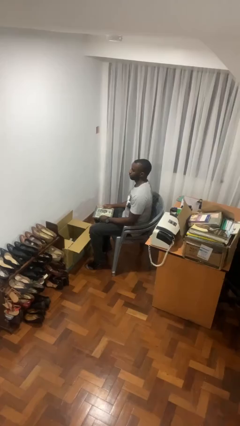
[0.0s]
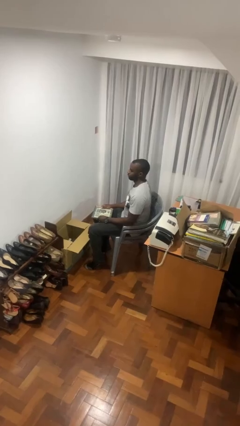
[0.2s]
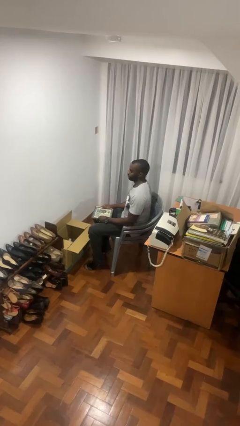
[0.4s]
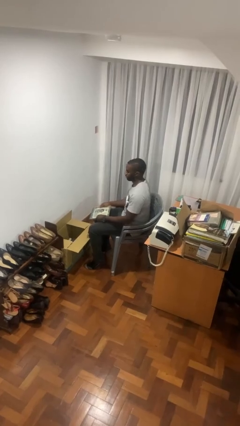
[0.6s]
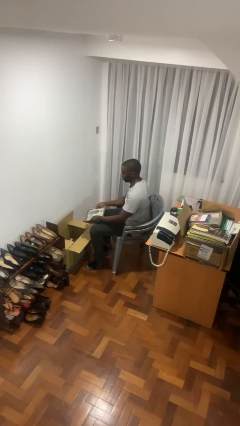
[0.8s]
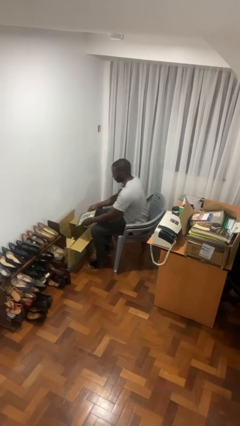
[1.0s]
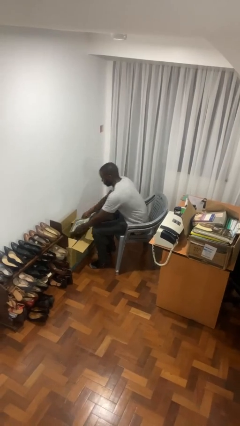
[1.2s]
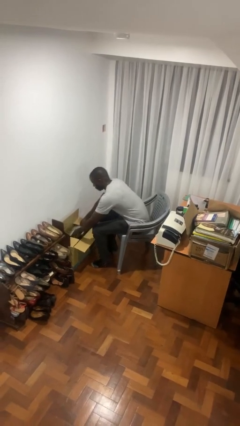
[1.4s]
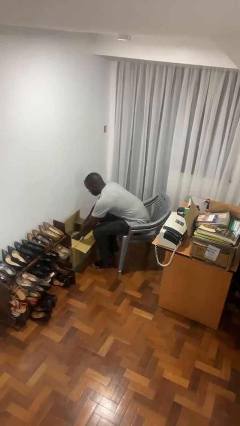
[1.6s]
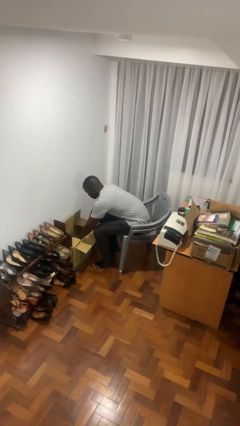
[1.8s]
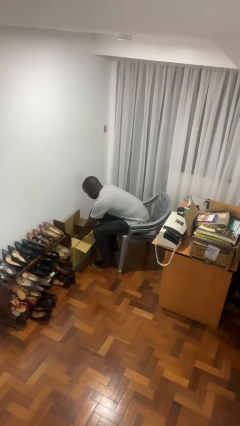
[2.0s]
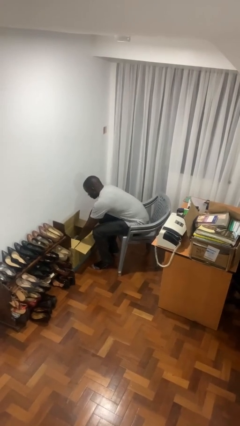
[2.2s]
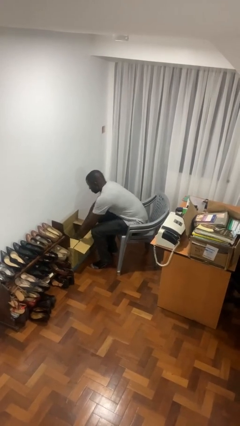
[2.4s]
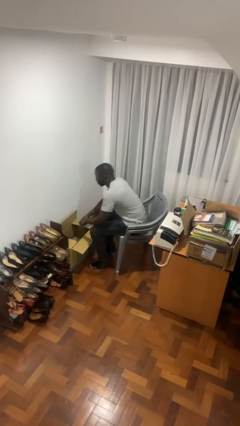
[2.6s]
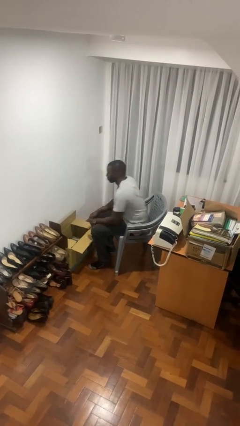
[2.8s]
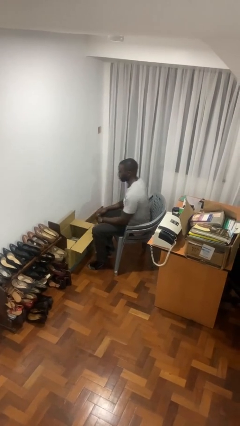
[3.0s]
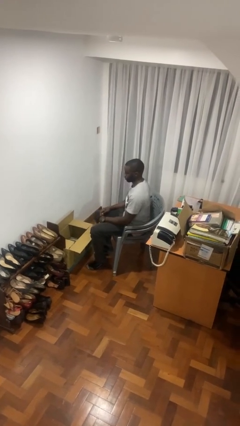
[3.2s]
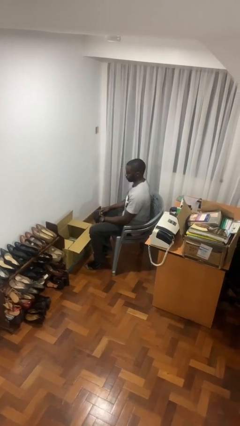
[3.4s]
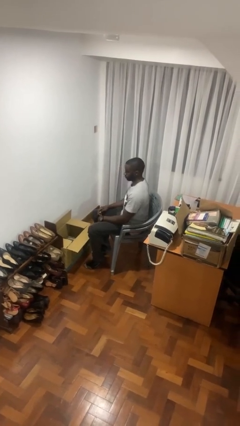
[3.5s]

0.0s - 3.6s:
person puts object into box

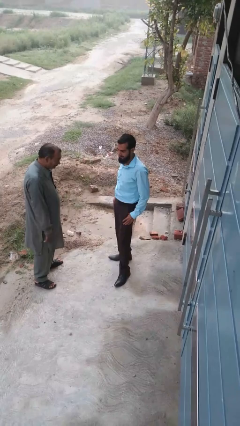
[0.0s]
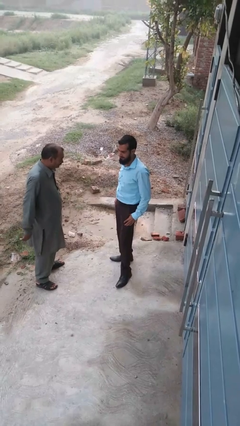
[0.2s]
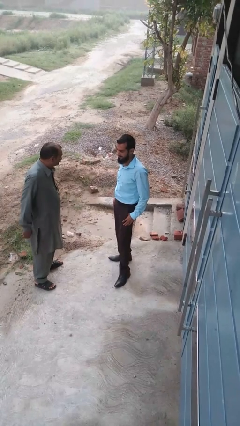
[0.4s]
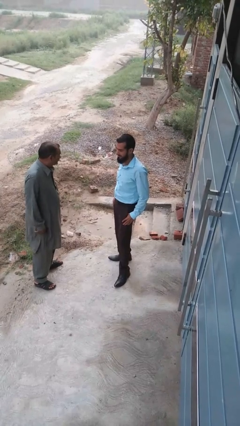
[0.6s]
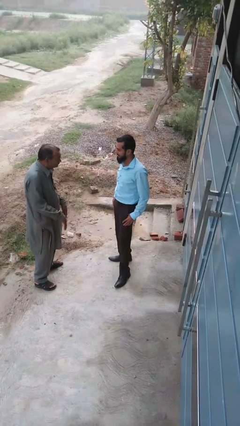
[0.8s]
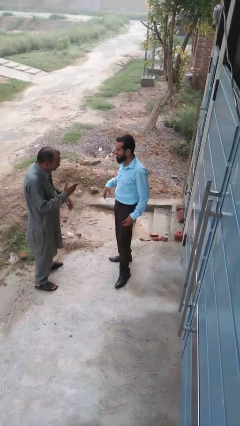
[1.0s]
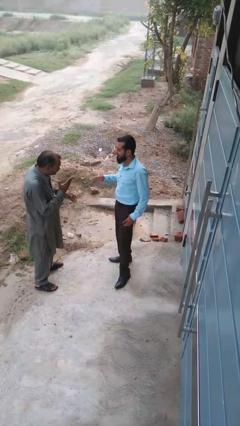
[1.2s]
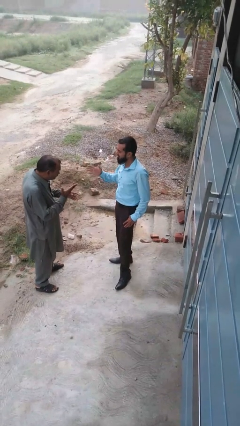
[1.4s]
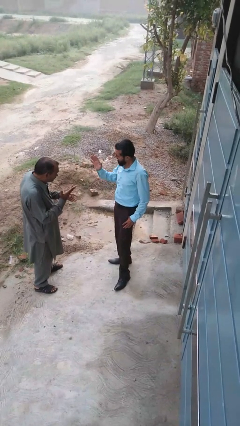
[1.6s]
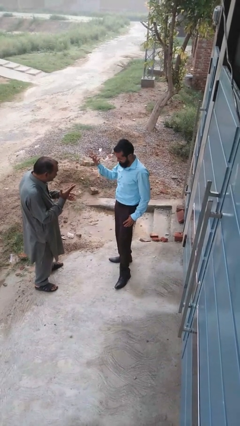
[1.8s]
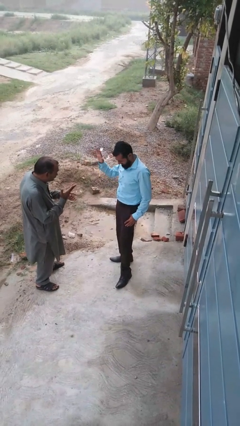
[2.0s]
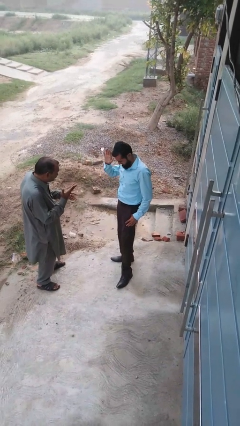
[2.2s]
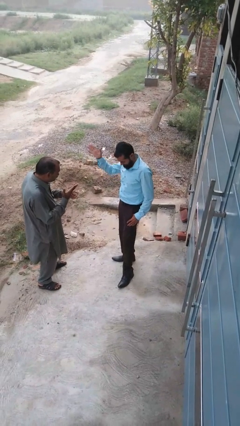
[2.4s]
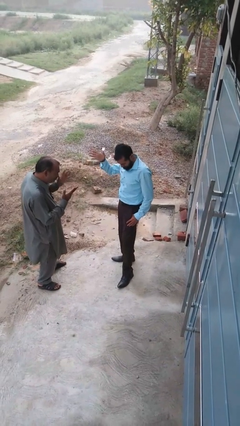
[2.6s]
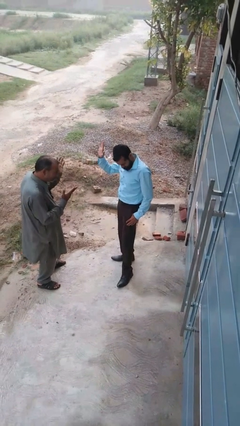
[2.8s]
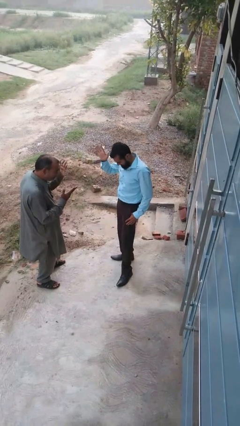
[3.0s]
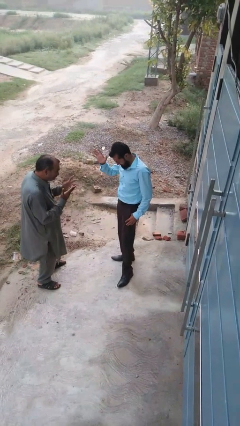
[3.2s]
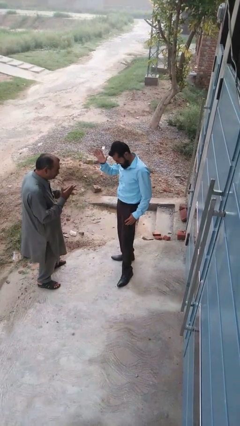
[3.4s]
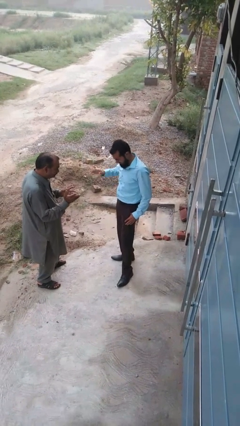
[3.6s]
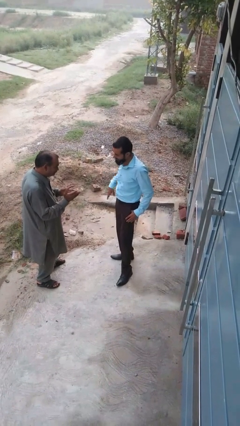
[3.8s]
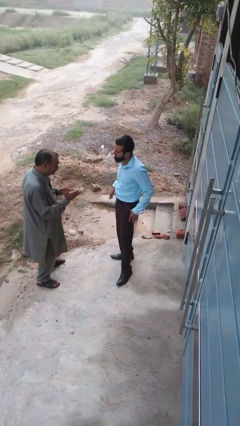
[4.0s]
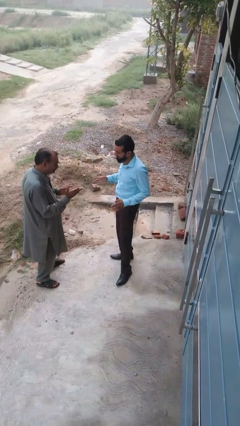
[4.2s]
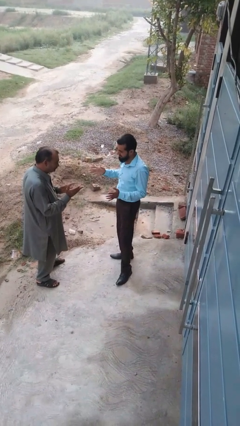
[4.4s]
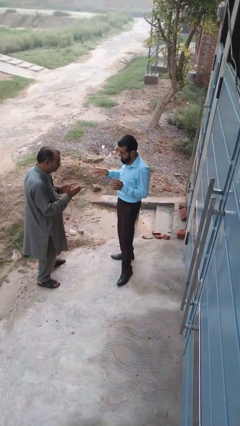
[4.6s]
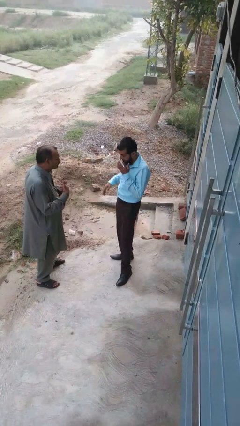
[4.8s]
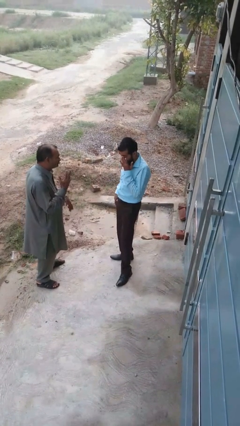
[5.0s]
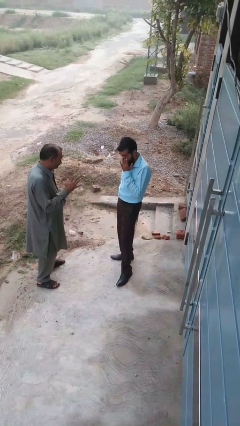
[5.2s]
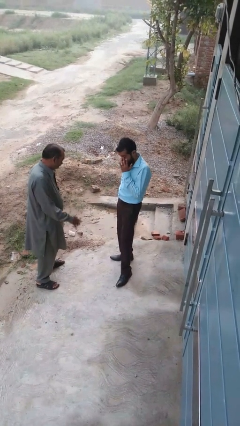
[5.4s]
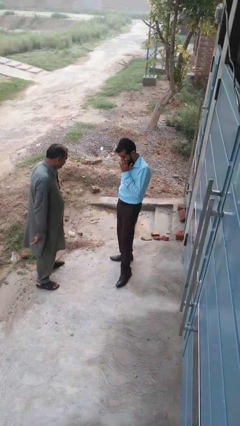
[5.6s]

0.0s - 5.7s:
person talks to person

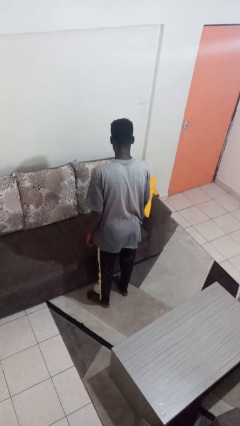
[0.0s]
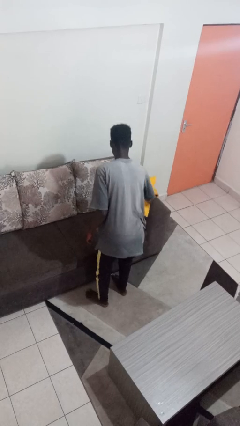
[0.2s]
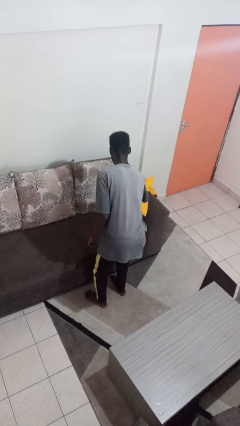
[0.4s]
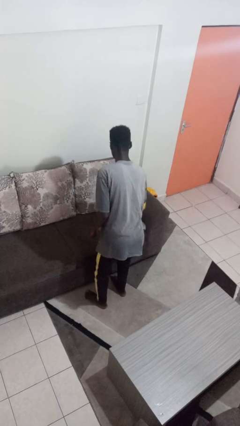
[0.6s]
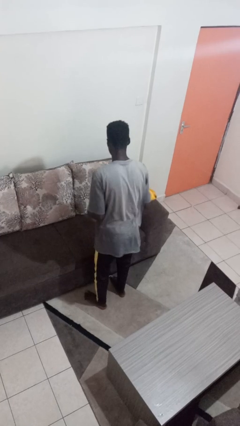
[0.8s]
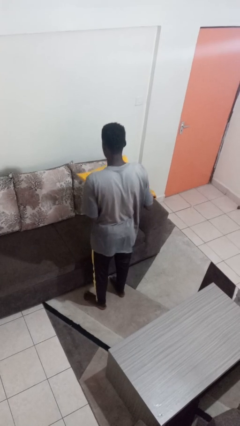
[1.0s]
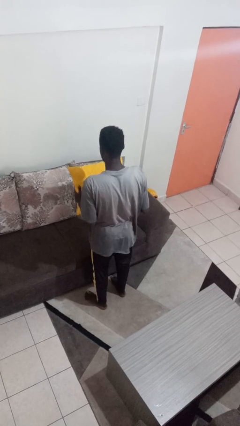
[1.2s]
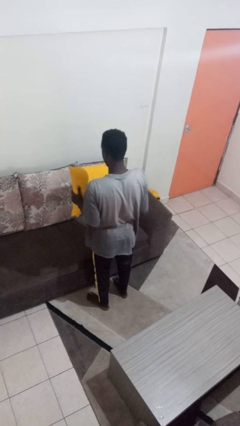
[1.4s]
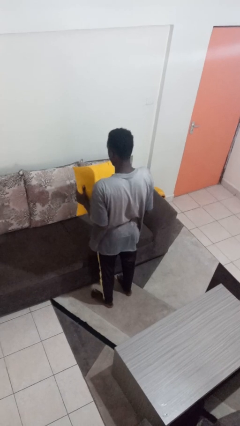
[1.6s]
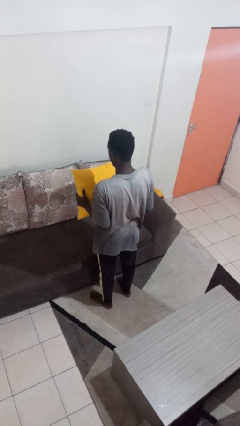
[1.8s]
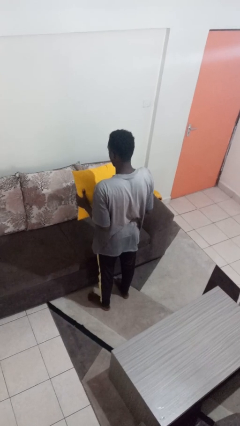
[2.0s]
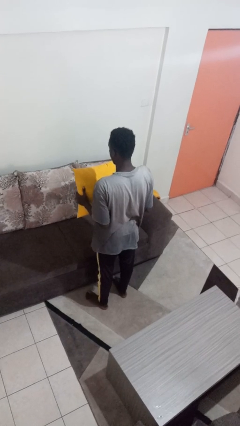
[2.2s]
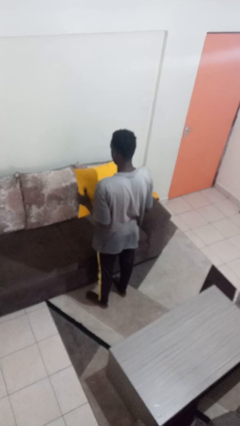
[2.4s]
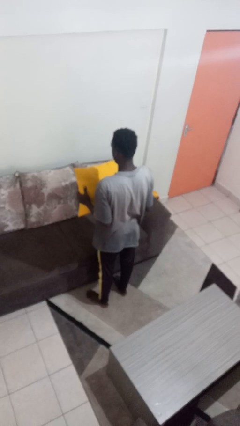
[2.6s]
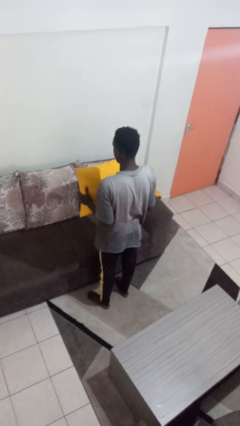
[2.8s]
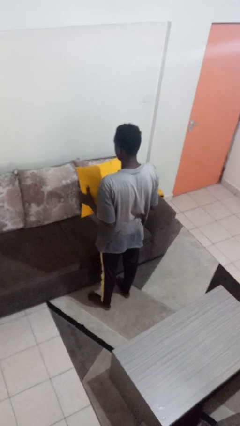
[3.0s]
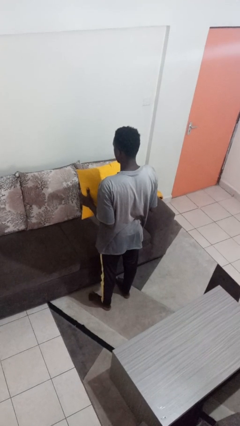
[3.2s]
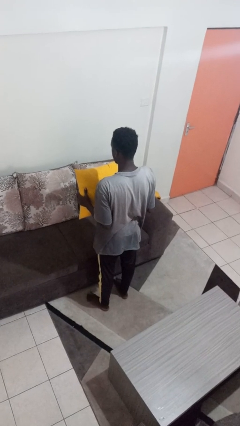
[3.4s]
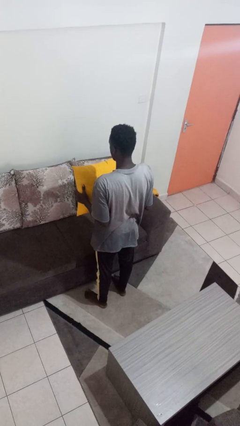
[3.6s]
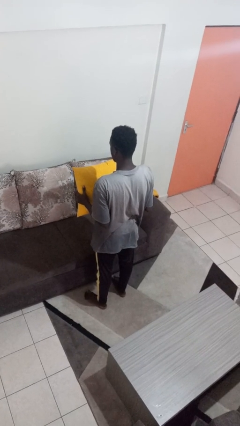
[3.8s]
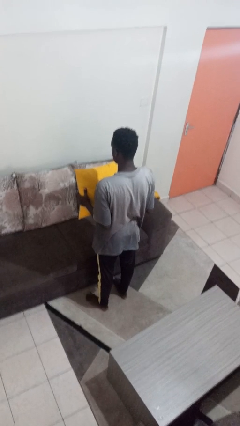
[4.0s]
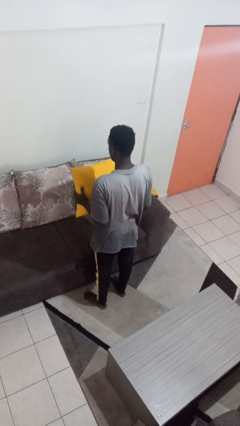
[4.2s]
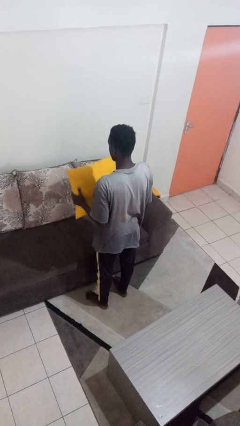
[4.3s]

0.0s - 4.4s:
person picks up object from couch

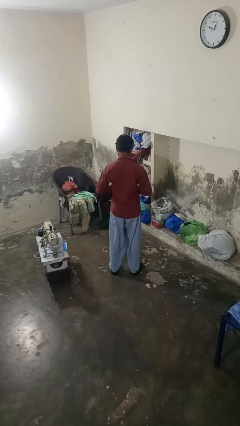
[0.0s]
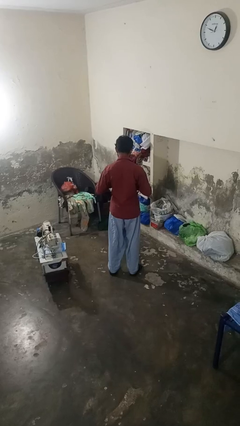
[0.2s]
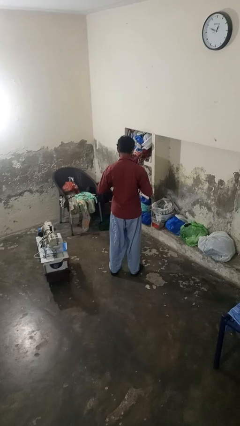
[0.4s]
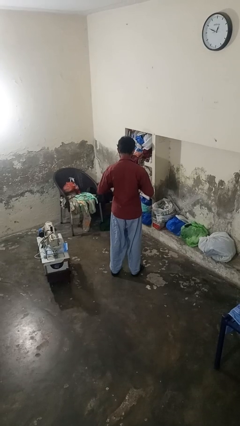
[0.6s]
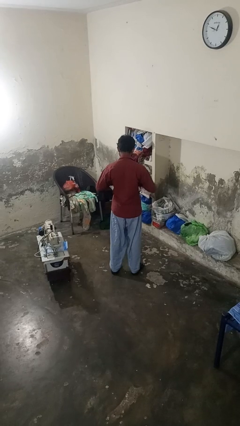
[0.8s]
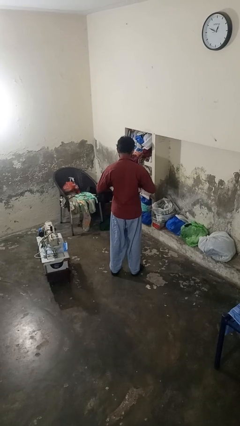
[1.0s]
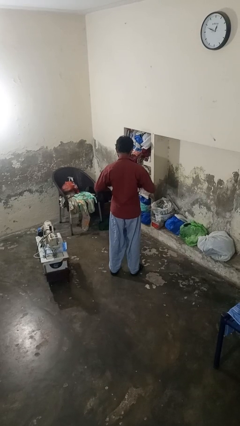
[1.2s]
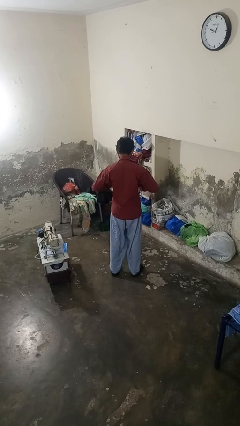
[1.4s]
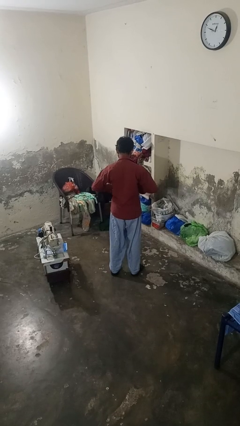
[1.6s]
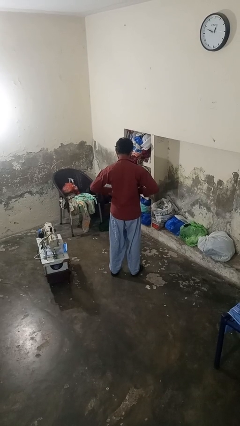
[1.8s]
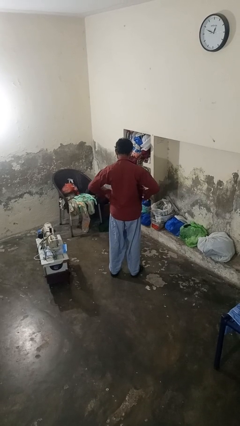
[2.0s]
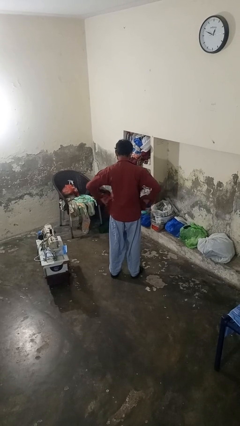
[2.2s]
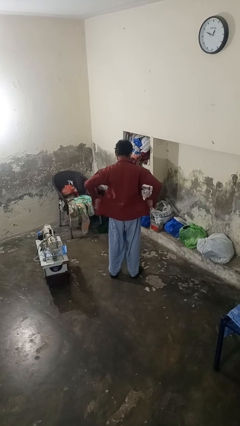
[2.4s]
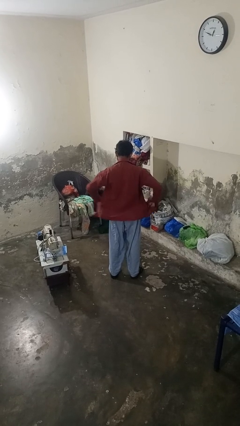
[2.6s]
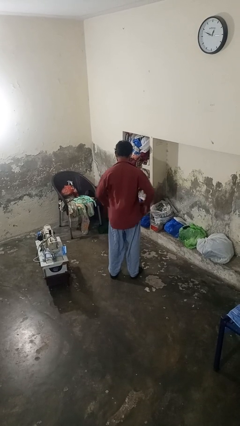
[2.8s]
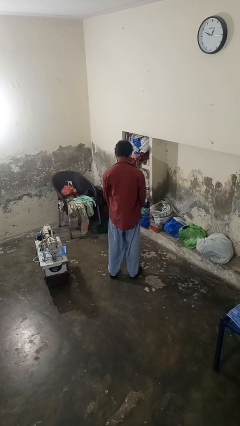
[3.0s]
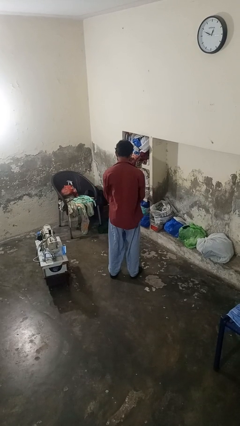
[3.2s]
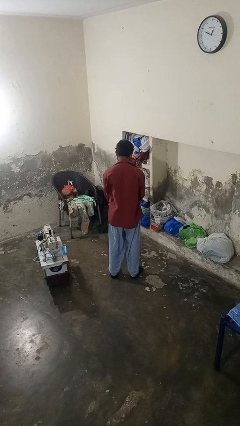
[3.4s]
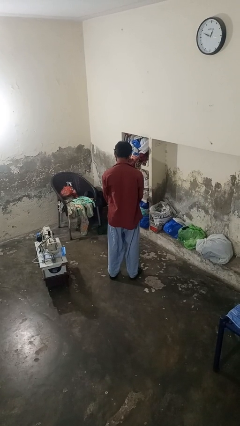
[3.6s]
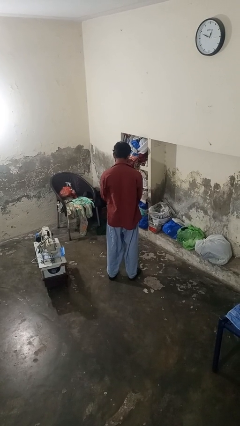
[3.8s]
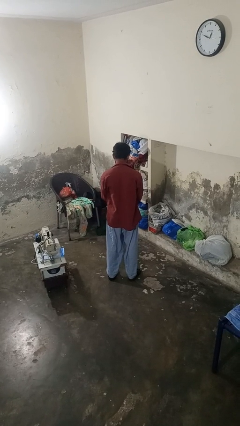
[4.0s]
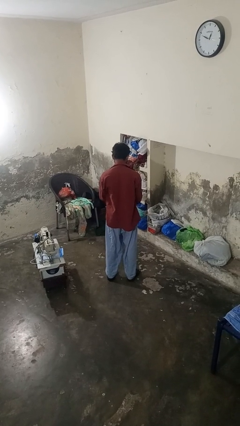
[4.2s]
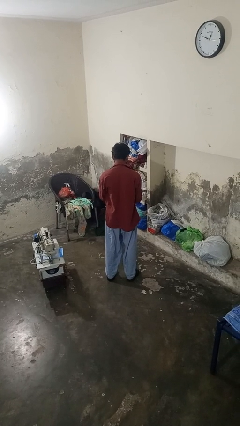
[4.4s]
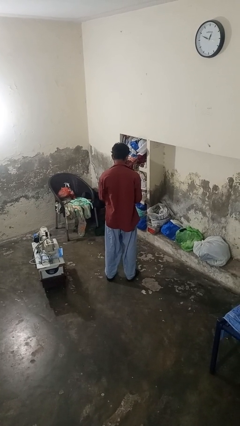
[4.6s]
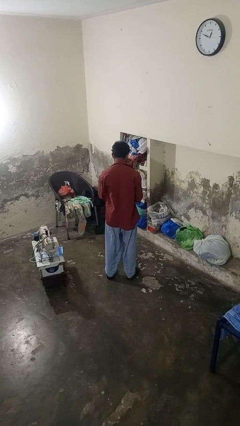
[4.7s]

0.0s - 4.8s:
person unbuttons shirt
